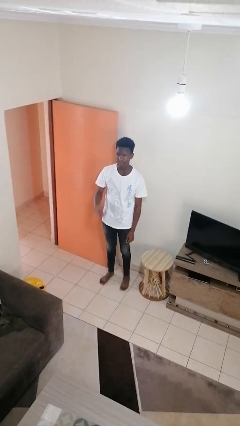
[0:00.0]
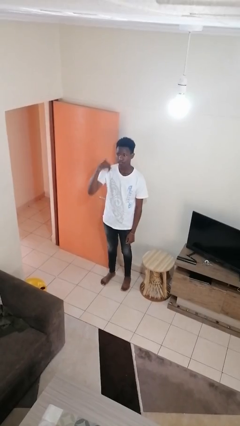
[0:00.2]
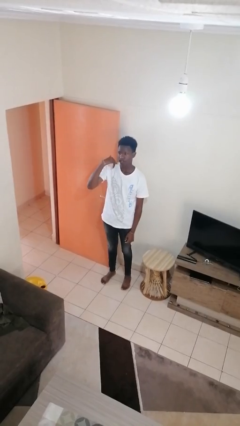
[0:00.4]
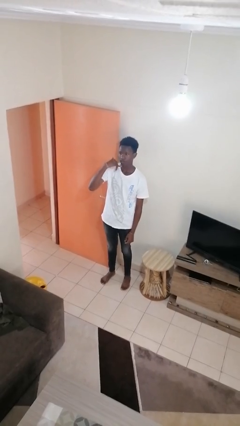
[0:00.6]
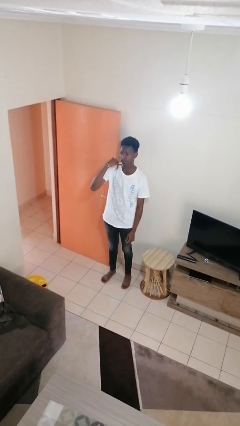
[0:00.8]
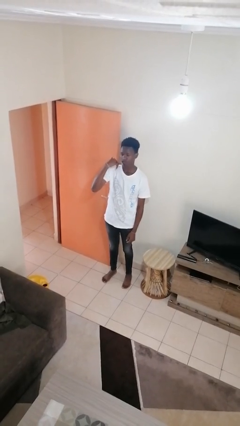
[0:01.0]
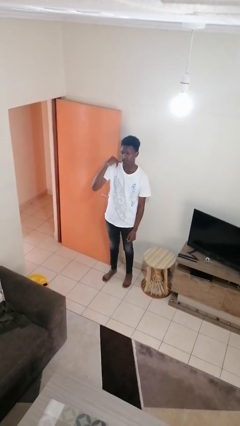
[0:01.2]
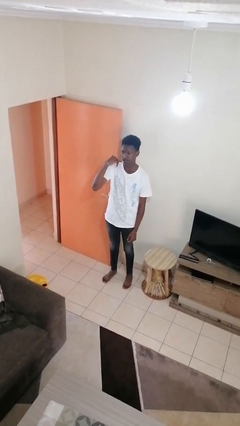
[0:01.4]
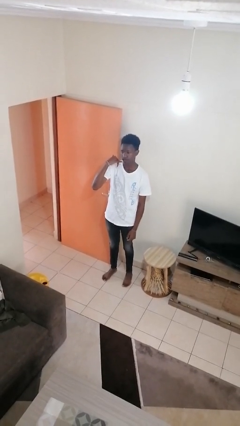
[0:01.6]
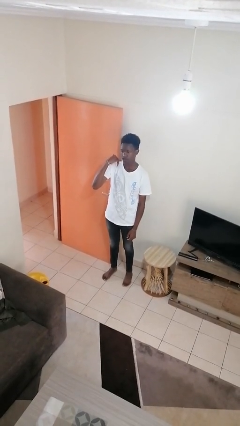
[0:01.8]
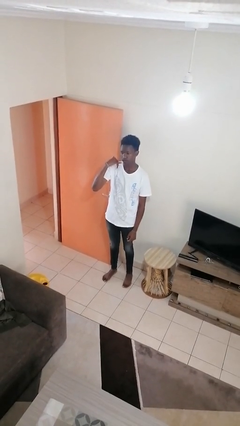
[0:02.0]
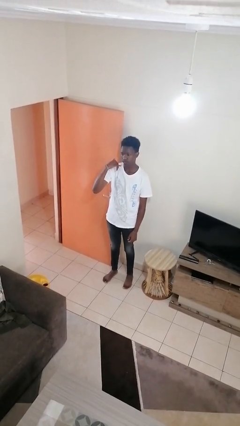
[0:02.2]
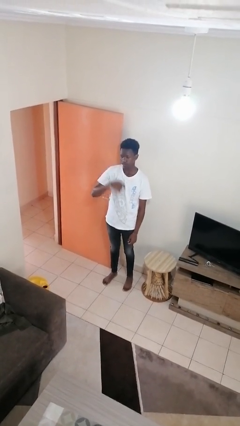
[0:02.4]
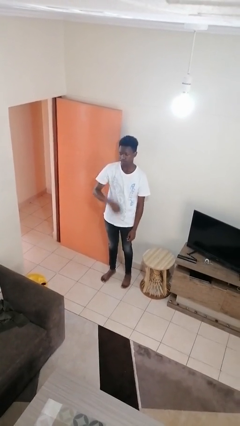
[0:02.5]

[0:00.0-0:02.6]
person gestures call me

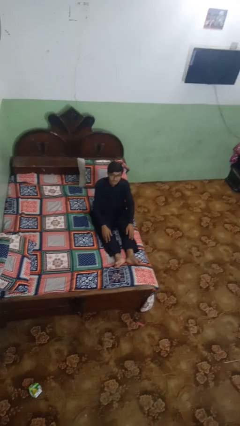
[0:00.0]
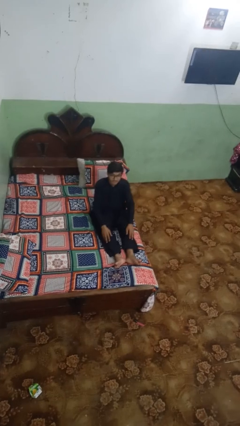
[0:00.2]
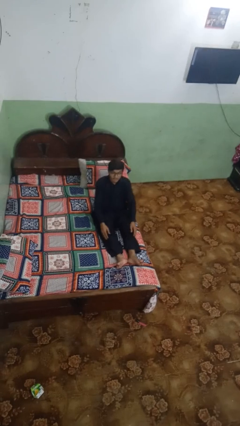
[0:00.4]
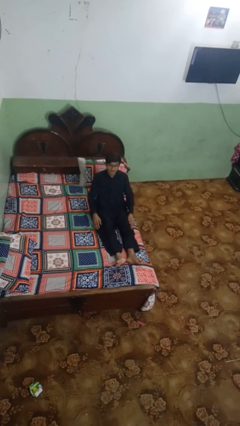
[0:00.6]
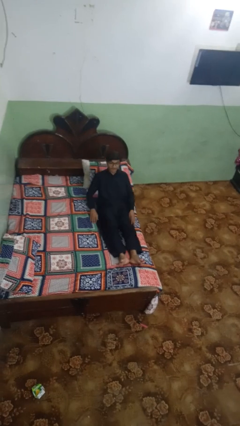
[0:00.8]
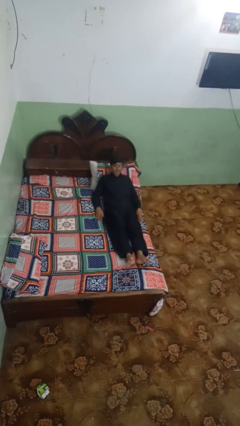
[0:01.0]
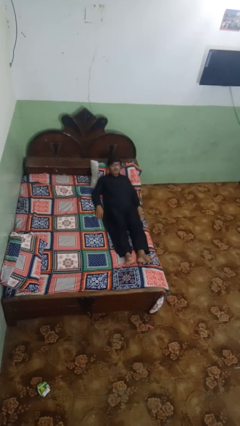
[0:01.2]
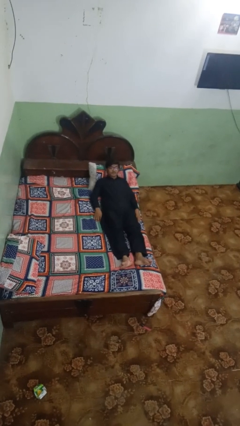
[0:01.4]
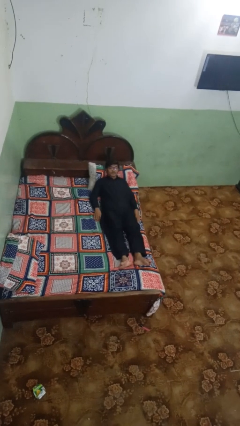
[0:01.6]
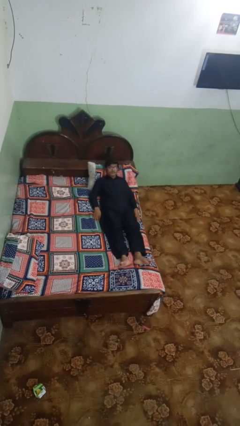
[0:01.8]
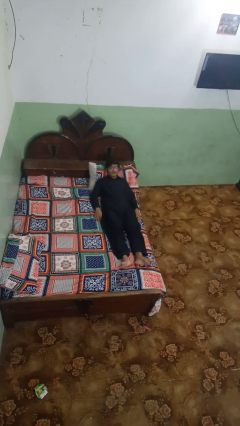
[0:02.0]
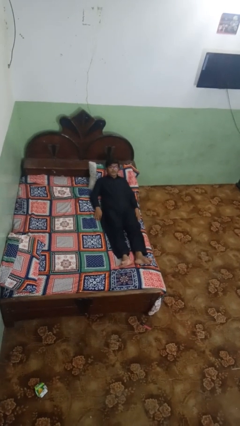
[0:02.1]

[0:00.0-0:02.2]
person lies down on bed

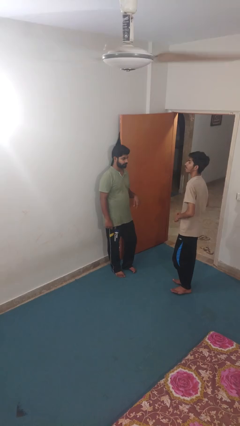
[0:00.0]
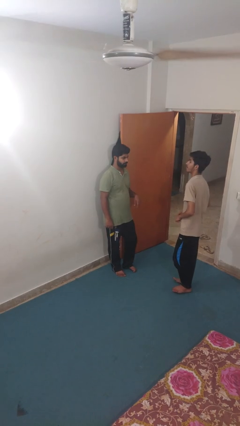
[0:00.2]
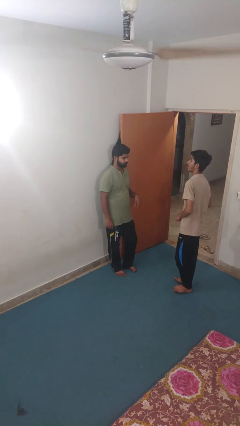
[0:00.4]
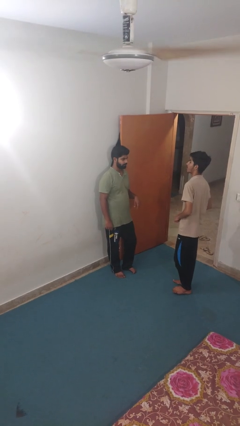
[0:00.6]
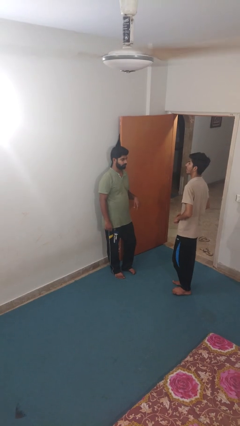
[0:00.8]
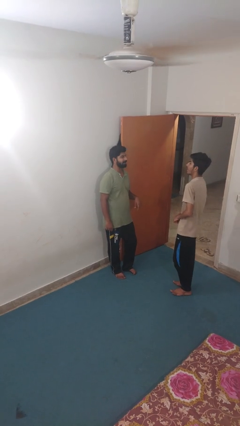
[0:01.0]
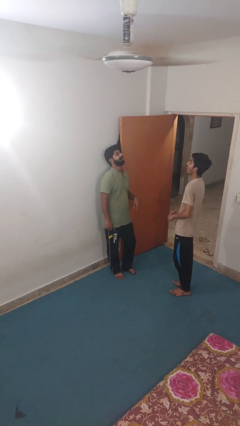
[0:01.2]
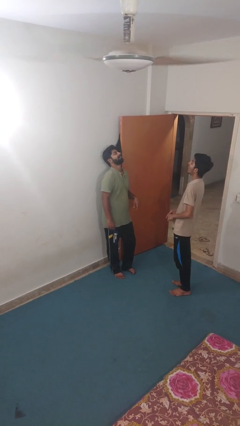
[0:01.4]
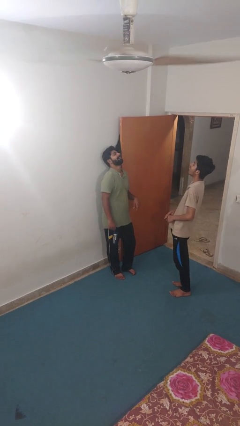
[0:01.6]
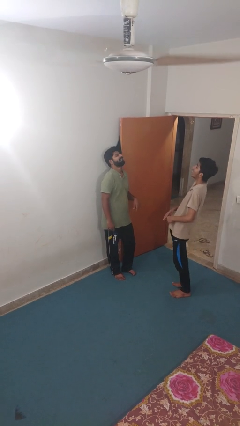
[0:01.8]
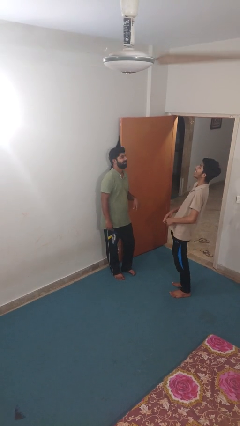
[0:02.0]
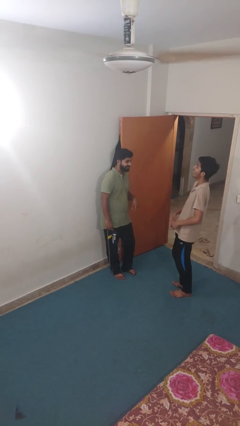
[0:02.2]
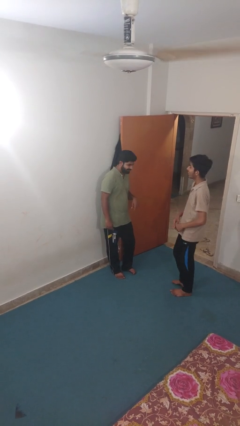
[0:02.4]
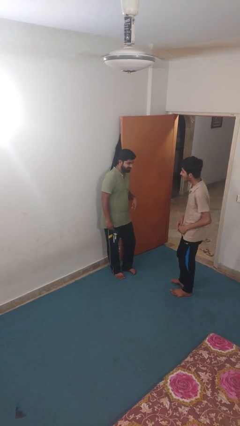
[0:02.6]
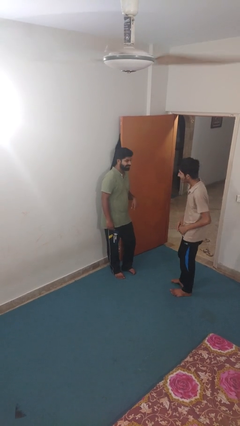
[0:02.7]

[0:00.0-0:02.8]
person laughs with person

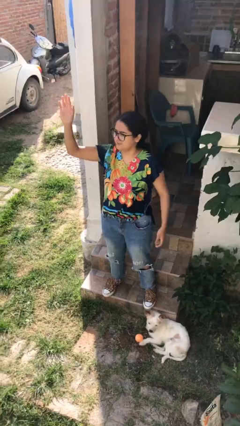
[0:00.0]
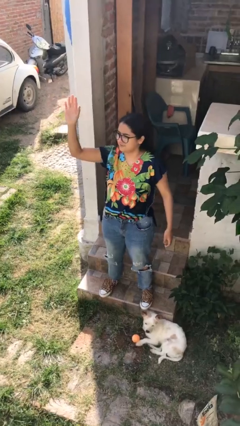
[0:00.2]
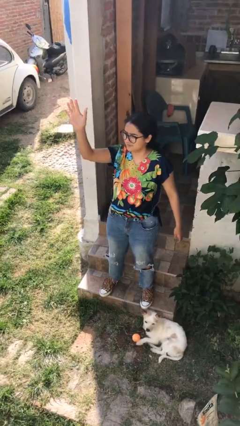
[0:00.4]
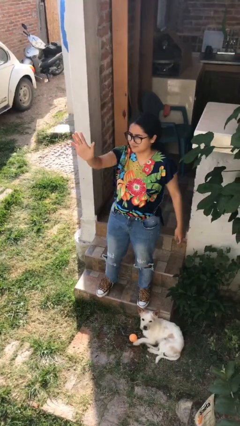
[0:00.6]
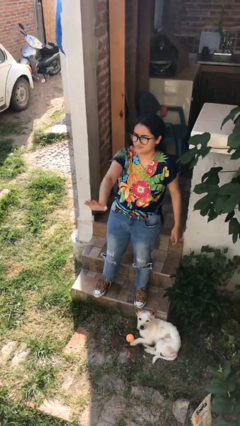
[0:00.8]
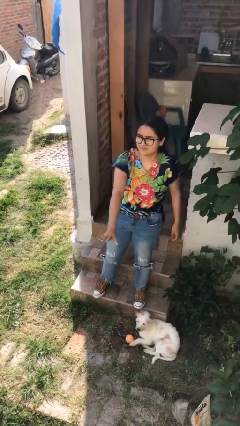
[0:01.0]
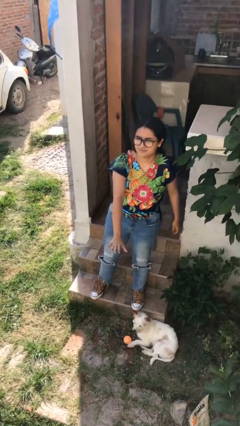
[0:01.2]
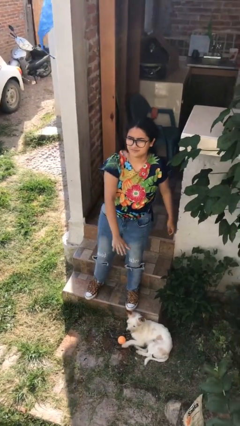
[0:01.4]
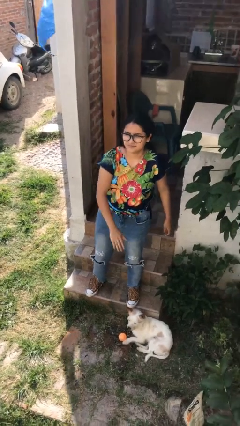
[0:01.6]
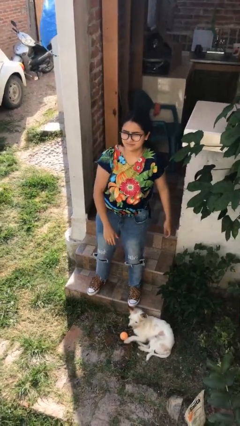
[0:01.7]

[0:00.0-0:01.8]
person gestures swipe down

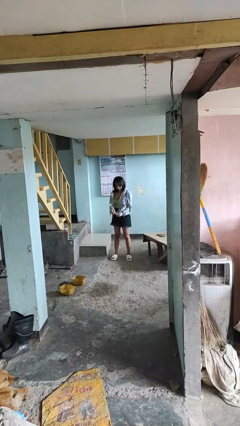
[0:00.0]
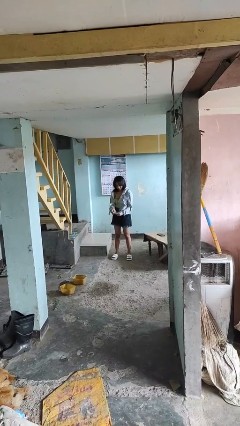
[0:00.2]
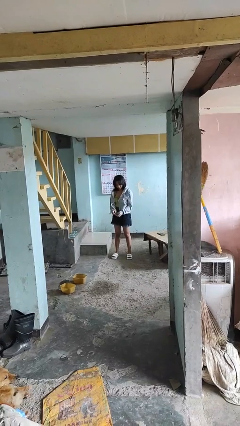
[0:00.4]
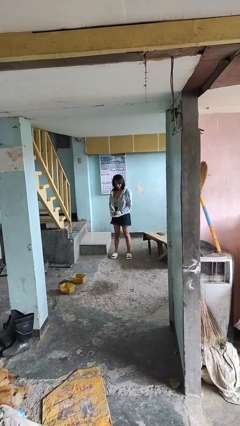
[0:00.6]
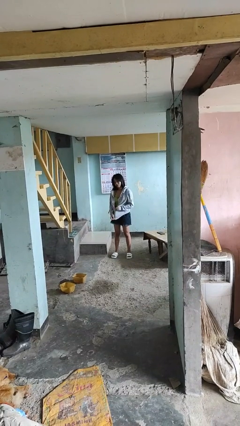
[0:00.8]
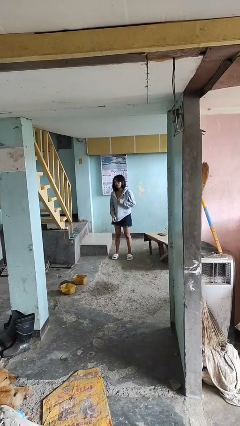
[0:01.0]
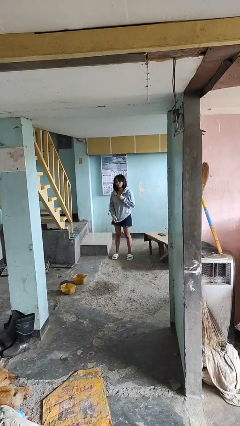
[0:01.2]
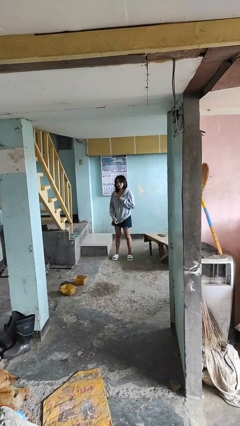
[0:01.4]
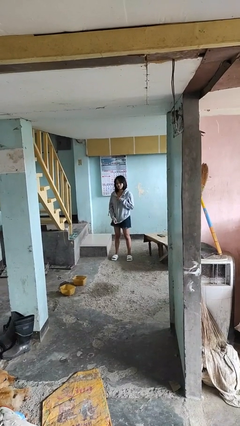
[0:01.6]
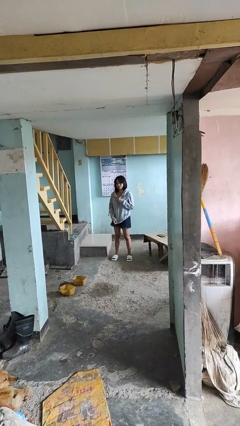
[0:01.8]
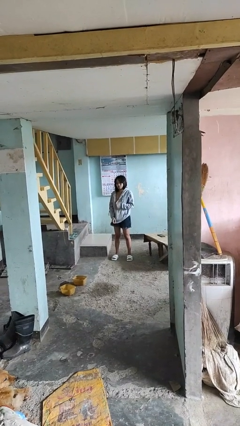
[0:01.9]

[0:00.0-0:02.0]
person zips up jacket

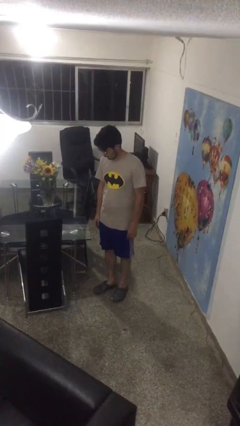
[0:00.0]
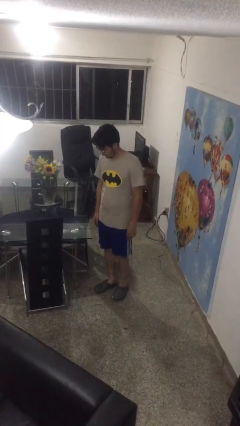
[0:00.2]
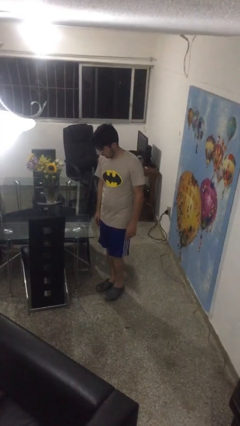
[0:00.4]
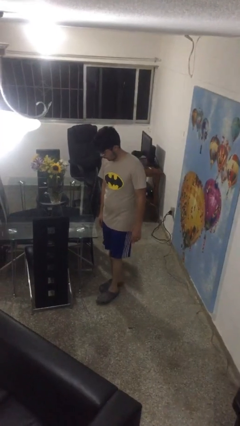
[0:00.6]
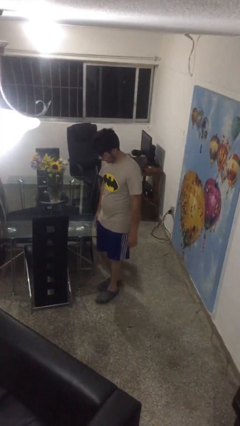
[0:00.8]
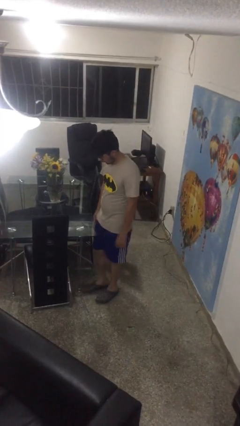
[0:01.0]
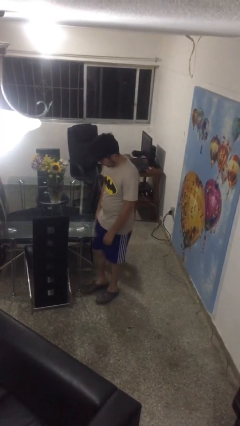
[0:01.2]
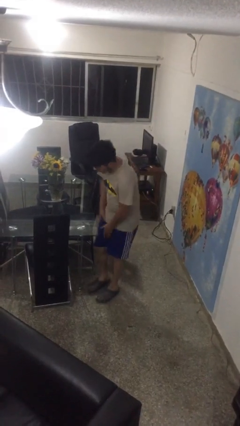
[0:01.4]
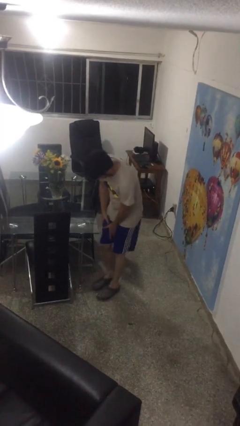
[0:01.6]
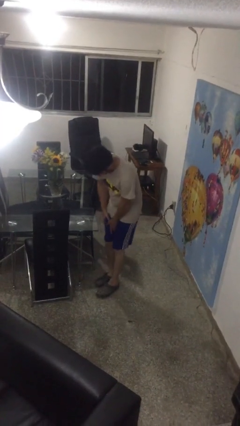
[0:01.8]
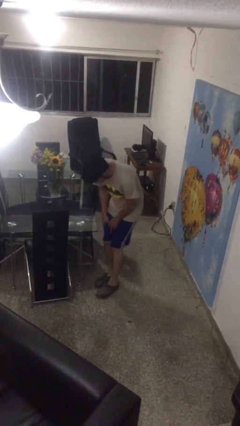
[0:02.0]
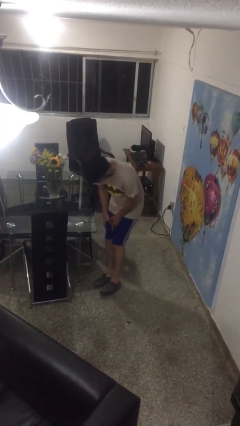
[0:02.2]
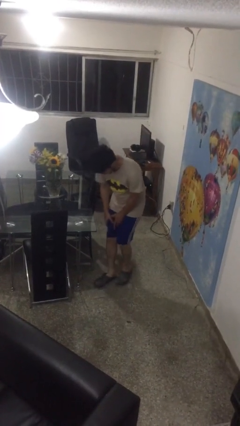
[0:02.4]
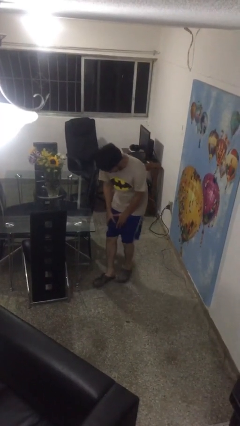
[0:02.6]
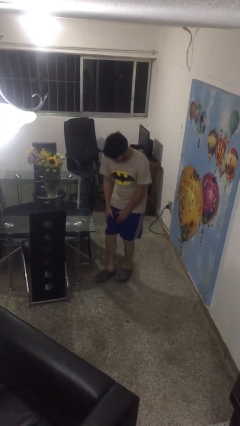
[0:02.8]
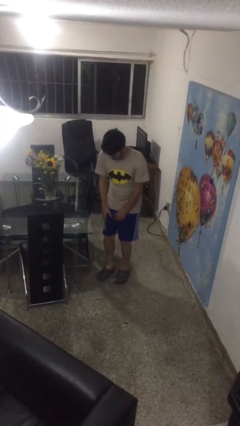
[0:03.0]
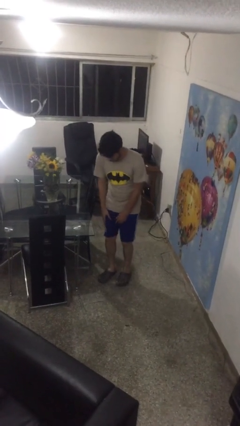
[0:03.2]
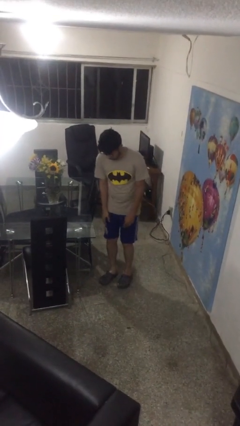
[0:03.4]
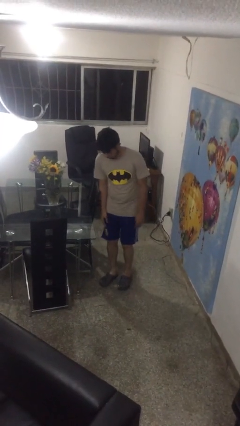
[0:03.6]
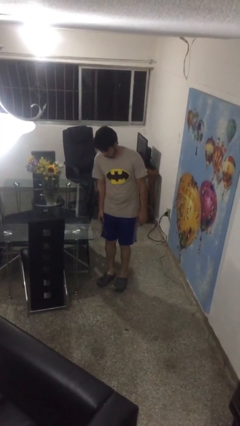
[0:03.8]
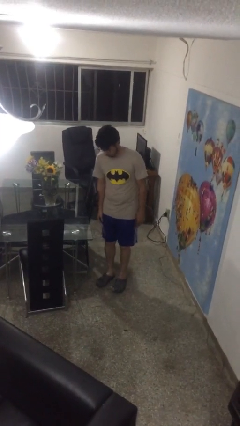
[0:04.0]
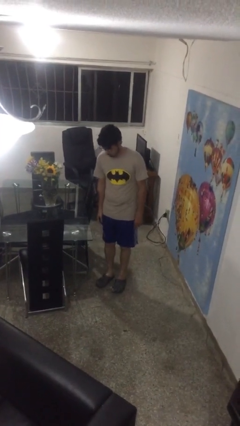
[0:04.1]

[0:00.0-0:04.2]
person bumps into table

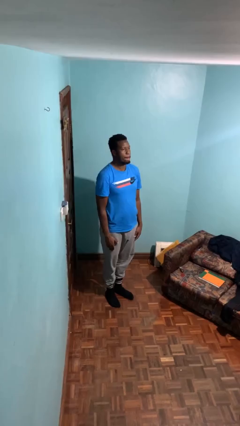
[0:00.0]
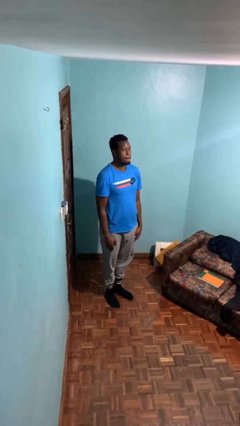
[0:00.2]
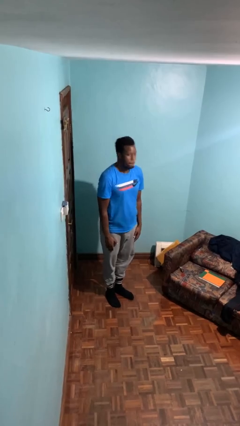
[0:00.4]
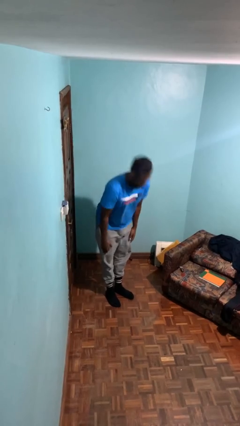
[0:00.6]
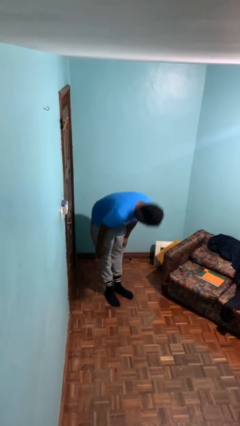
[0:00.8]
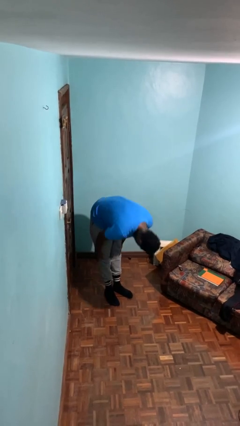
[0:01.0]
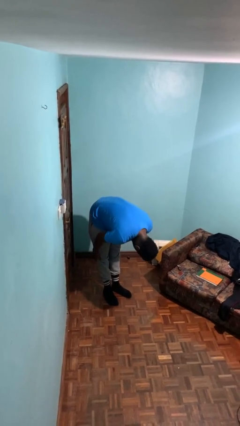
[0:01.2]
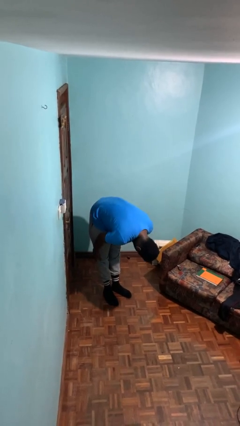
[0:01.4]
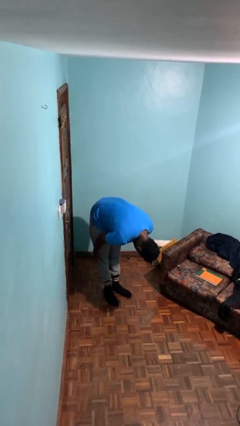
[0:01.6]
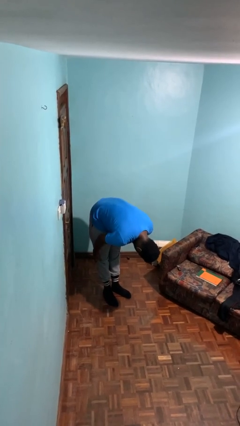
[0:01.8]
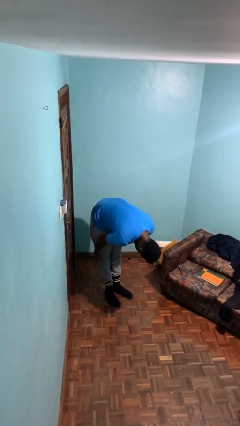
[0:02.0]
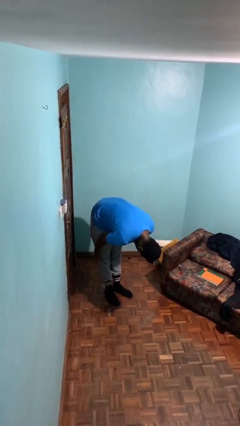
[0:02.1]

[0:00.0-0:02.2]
person bows
